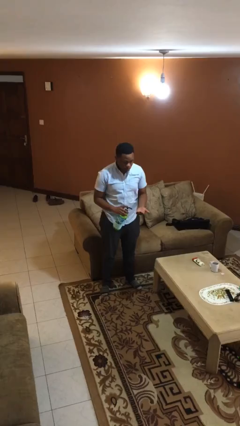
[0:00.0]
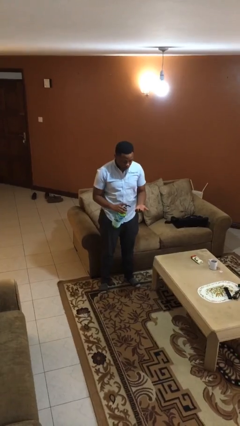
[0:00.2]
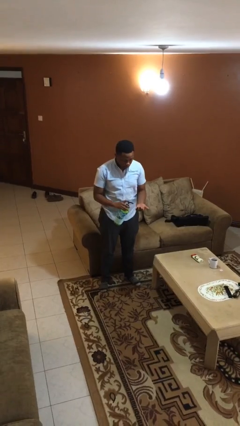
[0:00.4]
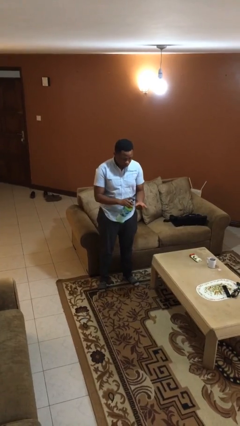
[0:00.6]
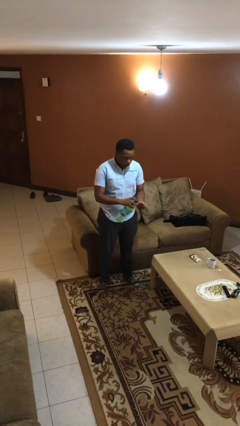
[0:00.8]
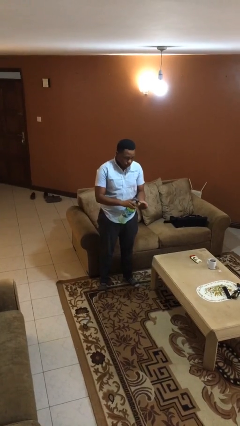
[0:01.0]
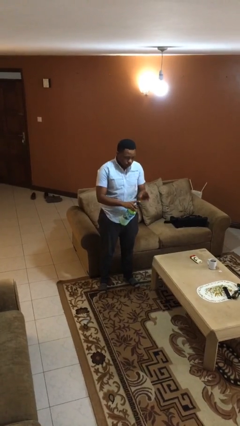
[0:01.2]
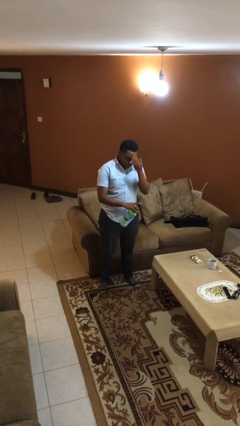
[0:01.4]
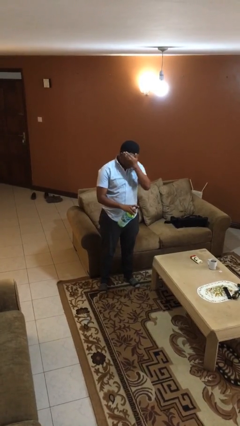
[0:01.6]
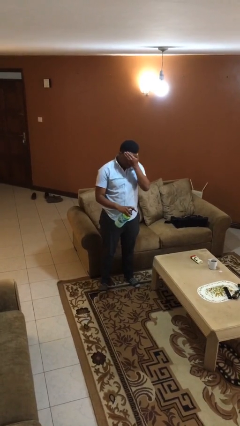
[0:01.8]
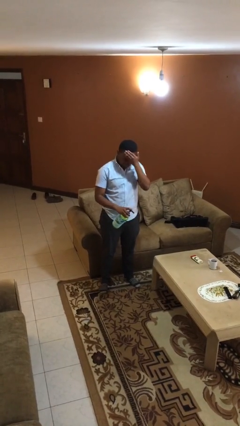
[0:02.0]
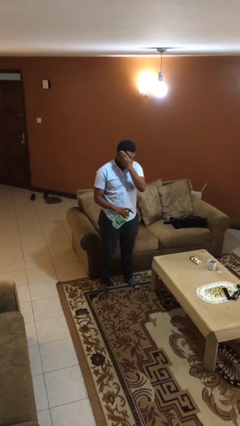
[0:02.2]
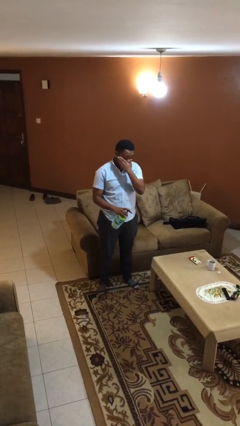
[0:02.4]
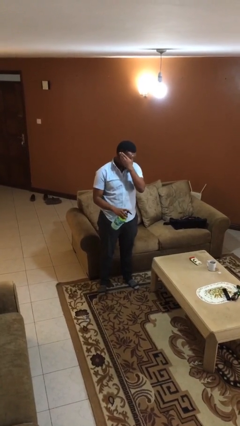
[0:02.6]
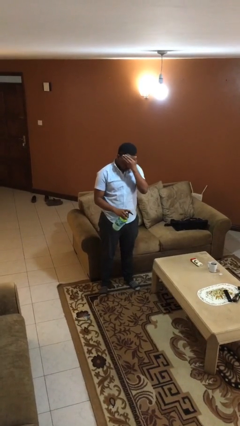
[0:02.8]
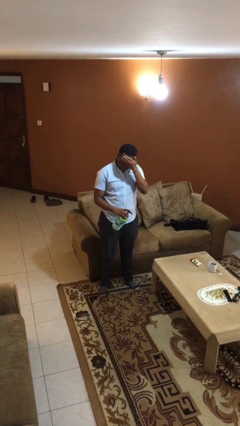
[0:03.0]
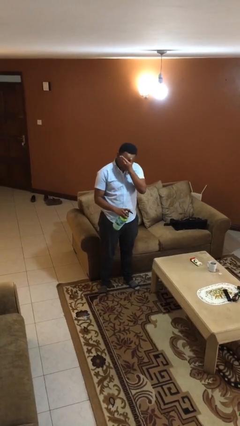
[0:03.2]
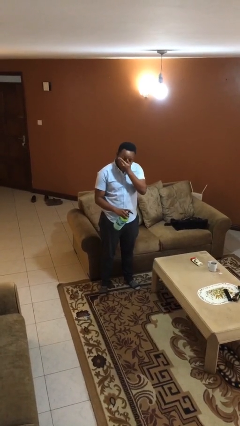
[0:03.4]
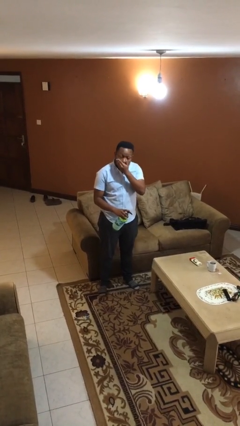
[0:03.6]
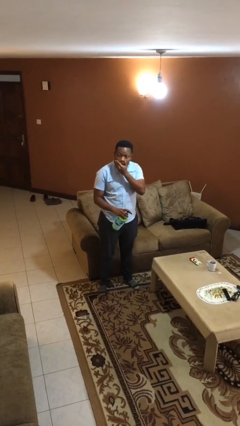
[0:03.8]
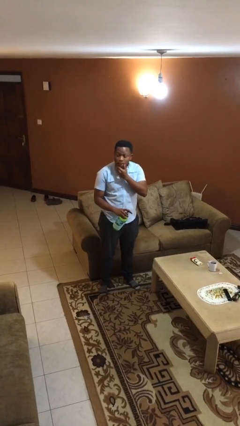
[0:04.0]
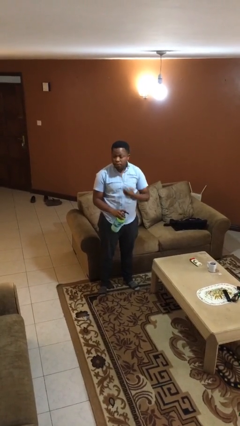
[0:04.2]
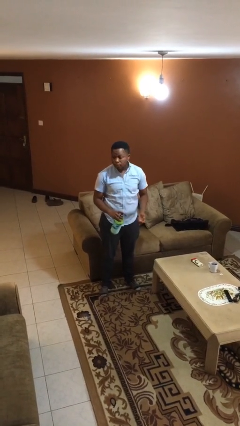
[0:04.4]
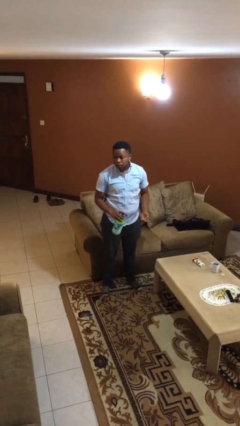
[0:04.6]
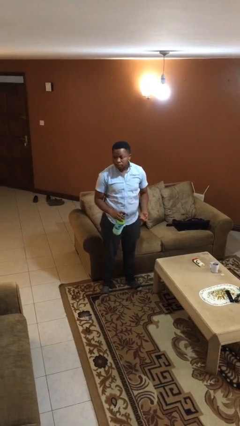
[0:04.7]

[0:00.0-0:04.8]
person applies sunscreen

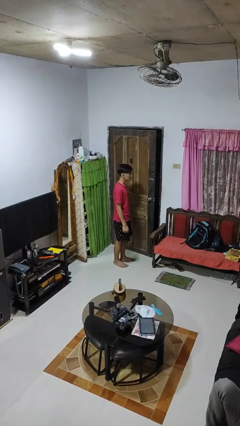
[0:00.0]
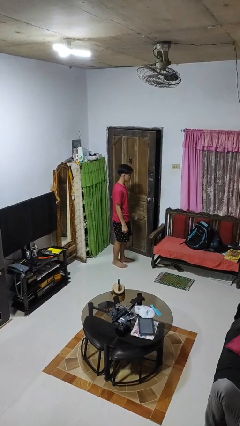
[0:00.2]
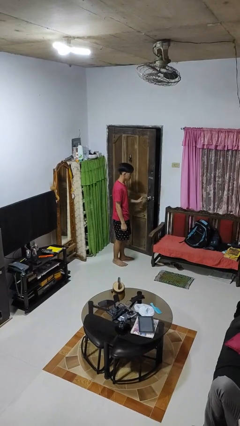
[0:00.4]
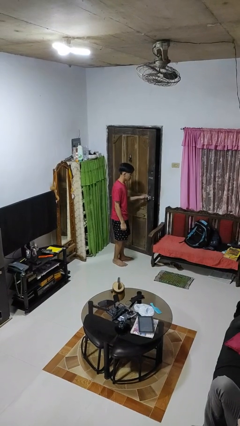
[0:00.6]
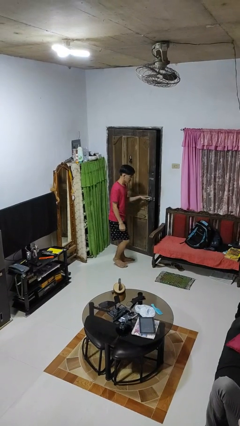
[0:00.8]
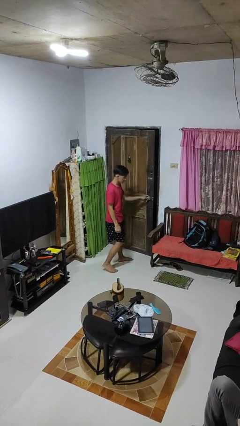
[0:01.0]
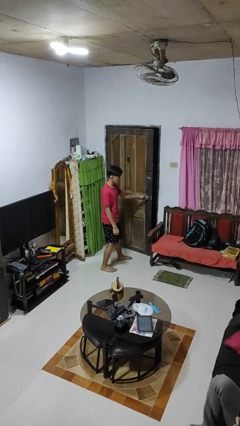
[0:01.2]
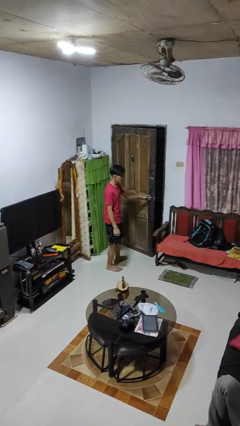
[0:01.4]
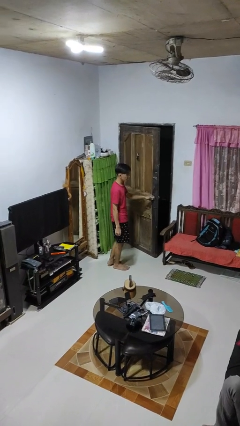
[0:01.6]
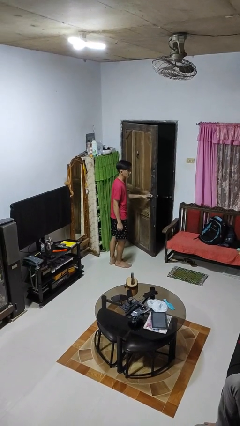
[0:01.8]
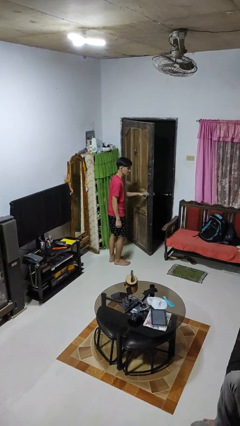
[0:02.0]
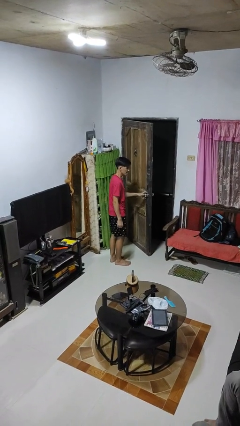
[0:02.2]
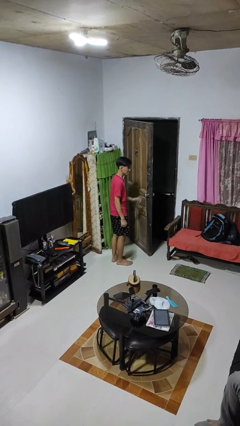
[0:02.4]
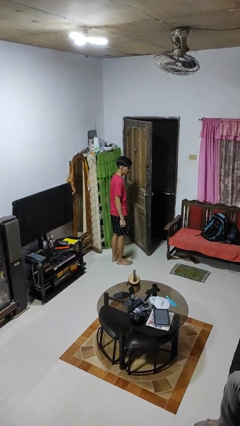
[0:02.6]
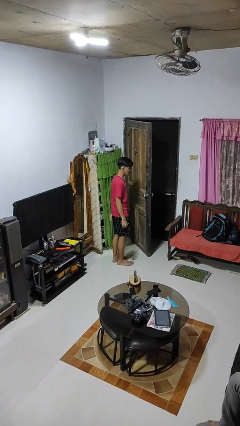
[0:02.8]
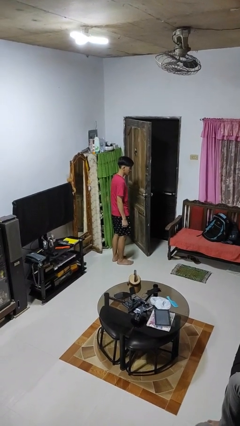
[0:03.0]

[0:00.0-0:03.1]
person opens facility door

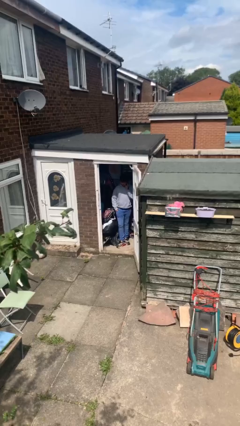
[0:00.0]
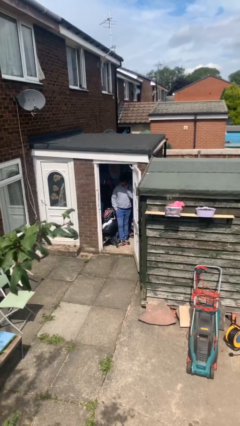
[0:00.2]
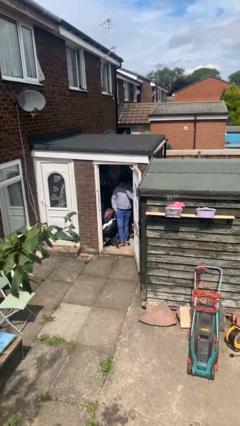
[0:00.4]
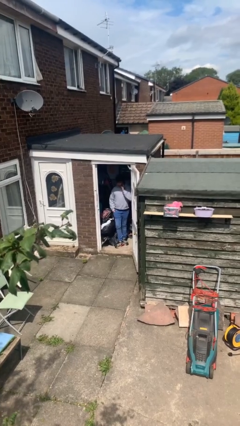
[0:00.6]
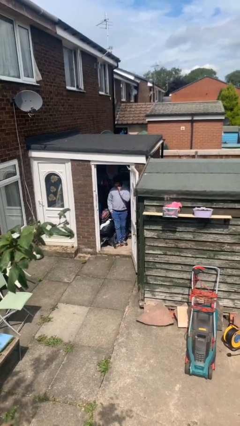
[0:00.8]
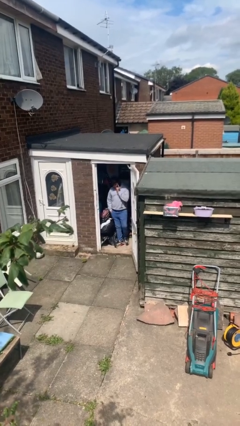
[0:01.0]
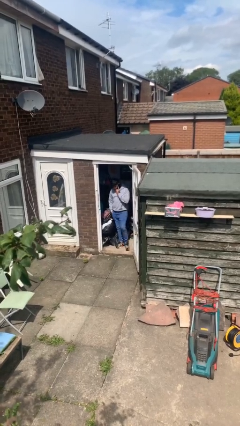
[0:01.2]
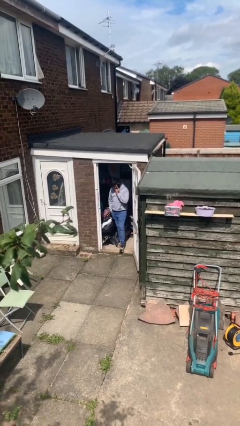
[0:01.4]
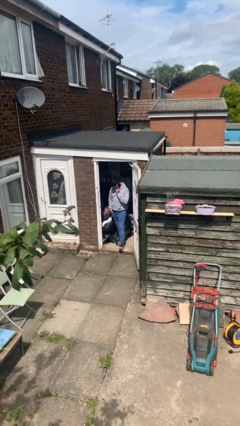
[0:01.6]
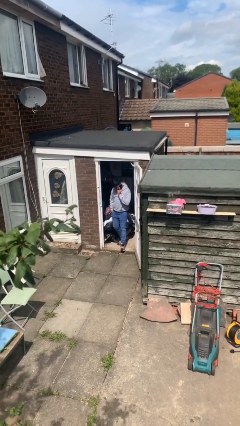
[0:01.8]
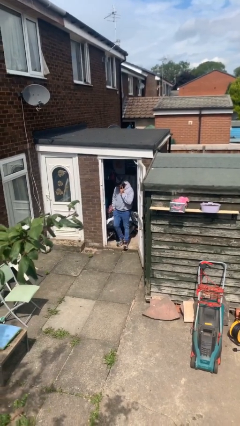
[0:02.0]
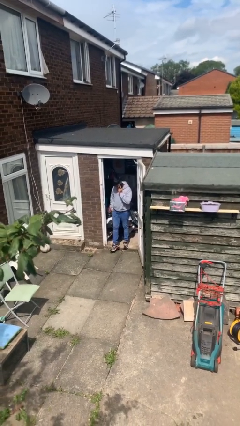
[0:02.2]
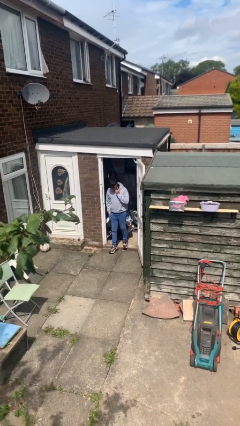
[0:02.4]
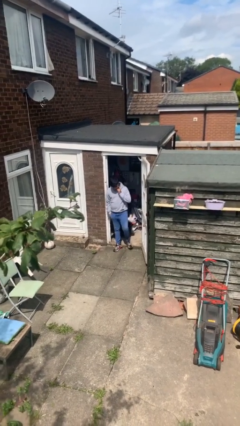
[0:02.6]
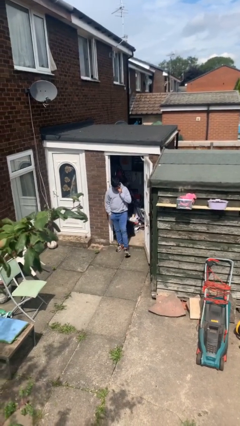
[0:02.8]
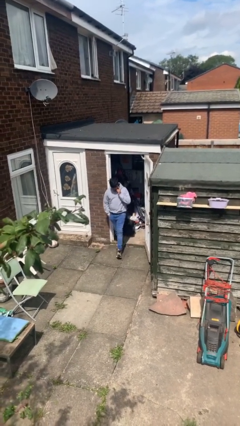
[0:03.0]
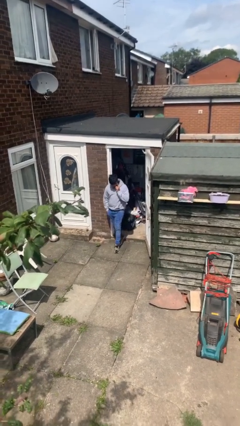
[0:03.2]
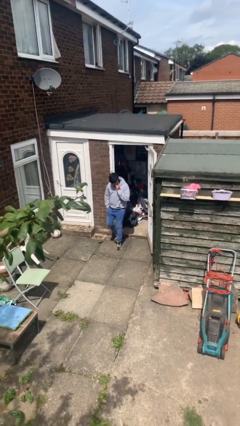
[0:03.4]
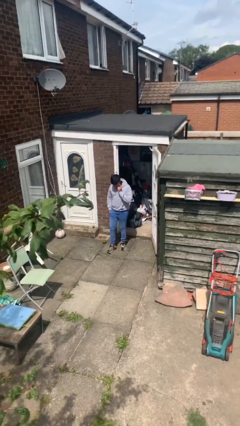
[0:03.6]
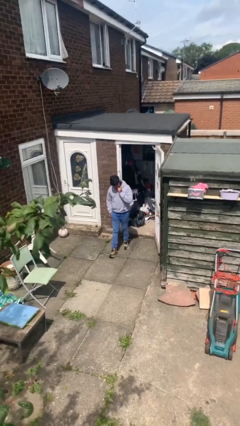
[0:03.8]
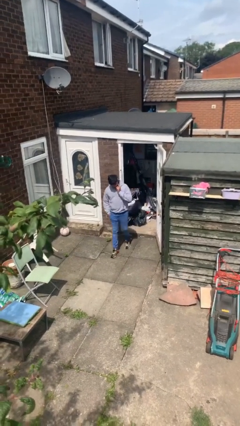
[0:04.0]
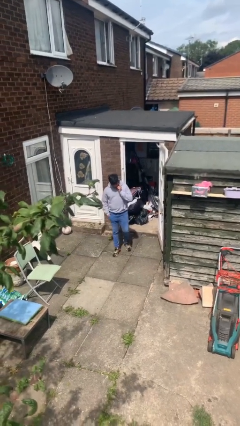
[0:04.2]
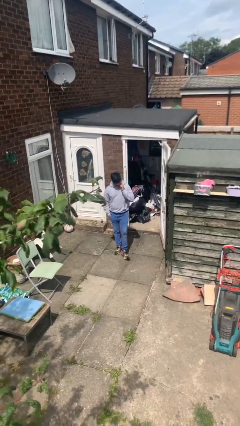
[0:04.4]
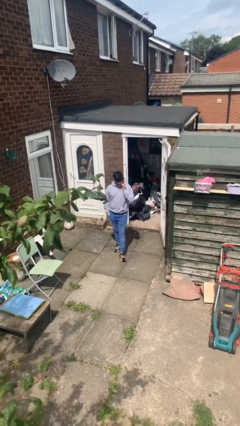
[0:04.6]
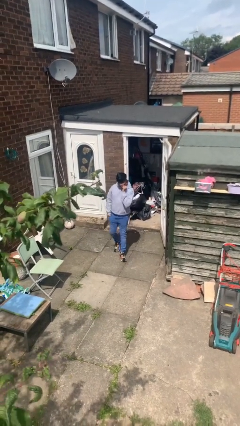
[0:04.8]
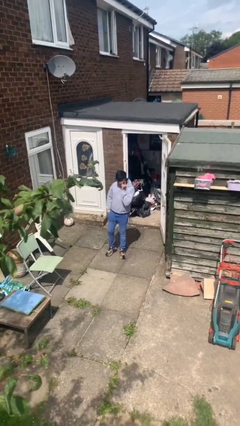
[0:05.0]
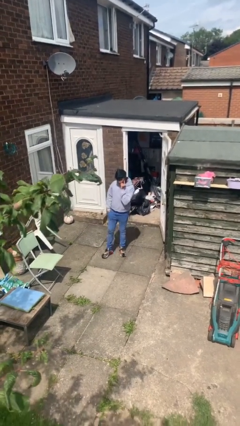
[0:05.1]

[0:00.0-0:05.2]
person enters scene through structure

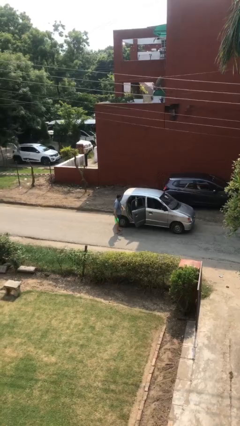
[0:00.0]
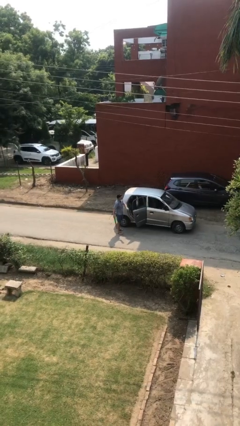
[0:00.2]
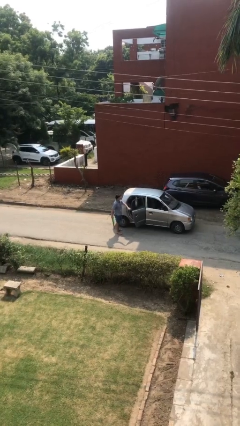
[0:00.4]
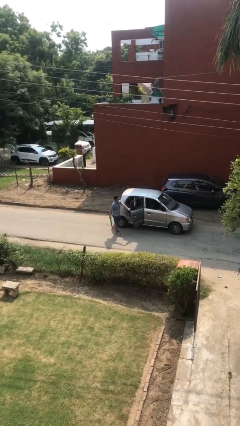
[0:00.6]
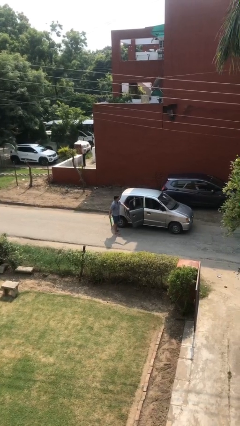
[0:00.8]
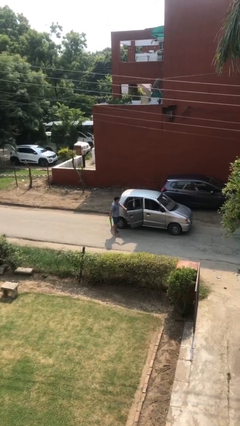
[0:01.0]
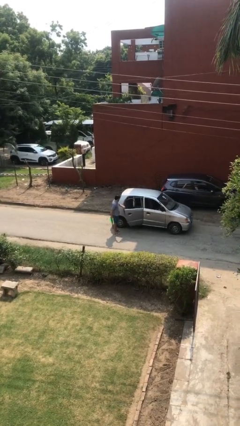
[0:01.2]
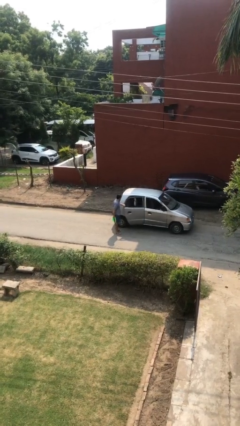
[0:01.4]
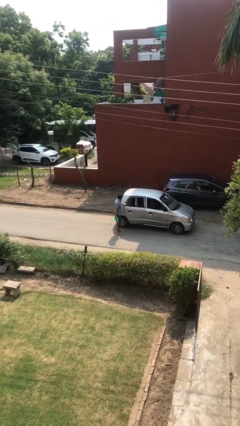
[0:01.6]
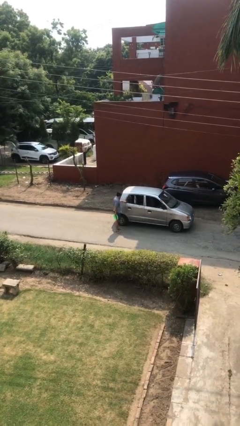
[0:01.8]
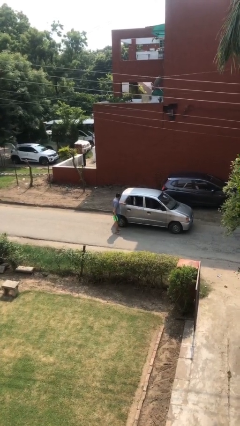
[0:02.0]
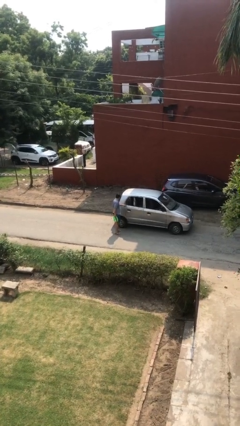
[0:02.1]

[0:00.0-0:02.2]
person closes car door

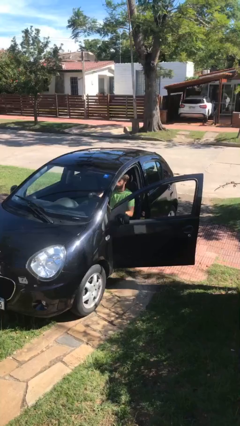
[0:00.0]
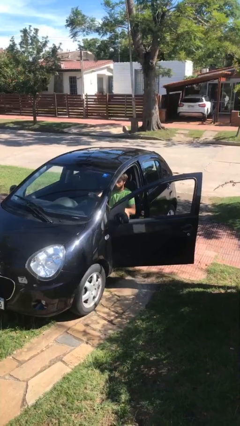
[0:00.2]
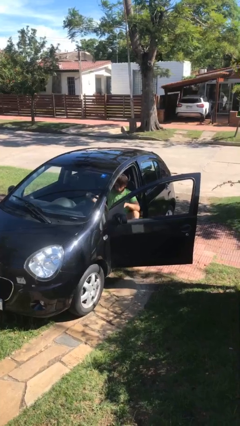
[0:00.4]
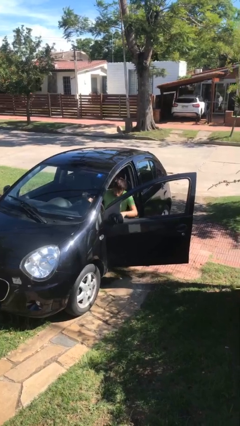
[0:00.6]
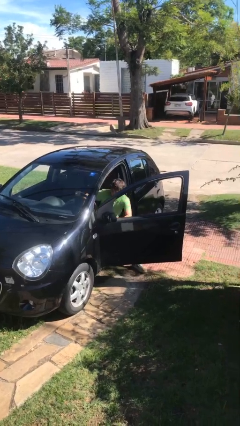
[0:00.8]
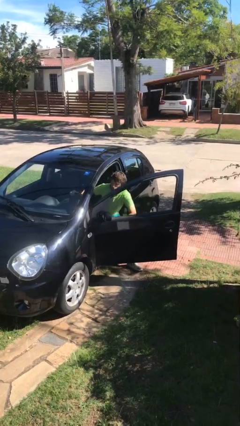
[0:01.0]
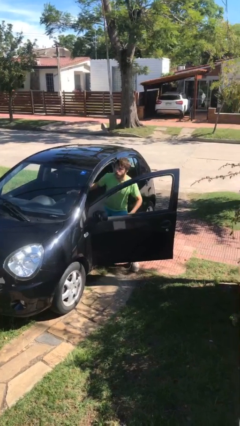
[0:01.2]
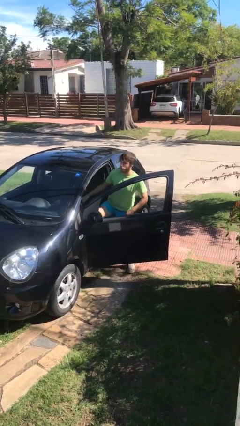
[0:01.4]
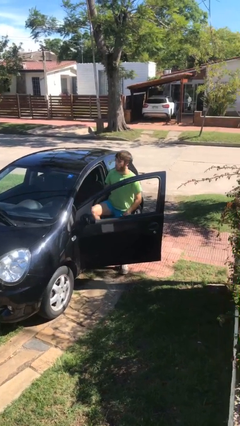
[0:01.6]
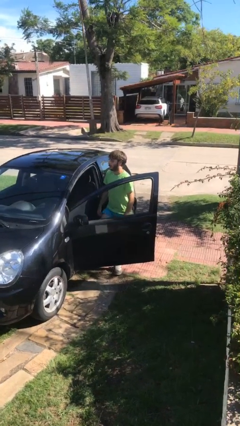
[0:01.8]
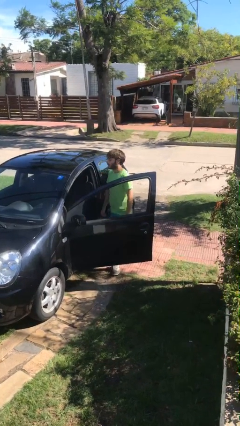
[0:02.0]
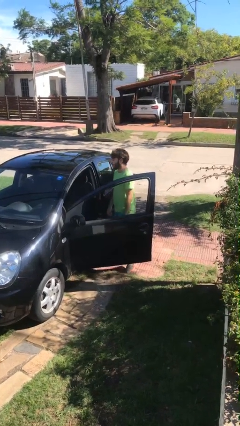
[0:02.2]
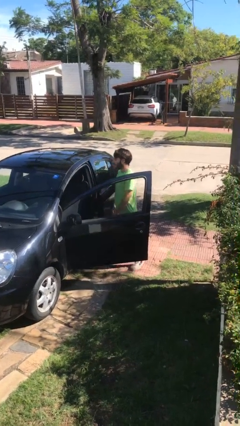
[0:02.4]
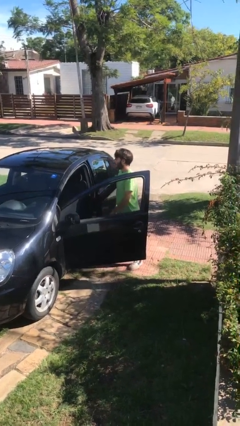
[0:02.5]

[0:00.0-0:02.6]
person exits car
